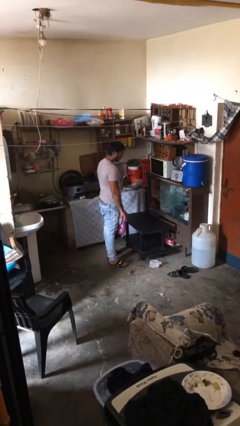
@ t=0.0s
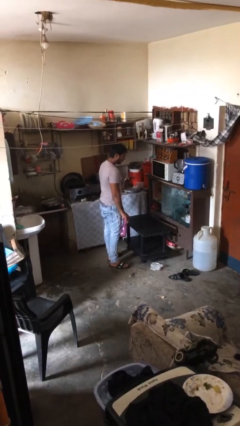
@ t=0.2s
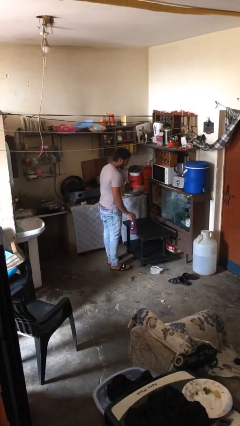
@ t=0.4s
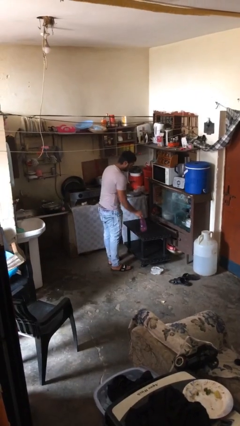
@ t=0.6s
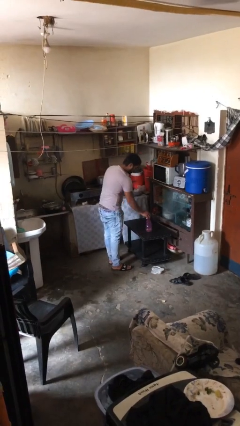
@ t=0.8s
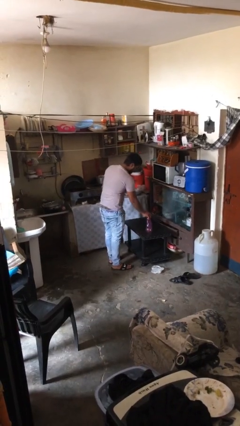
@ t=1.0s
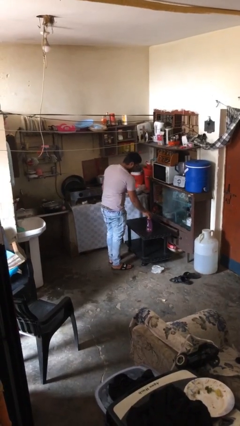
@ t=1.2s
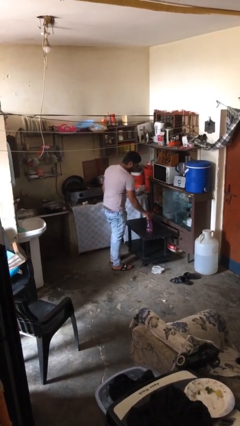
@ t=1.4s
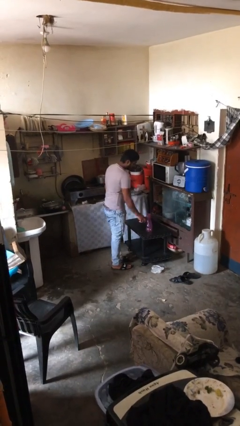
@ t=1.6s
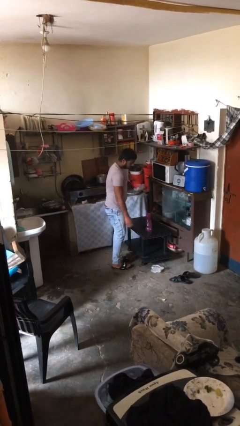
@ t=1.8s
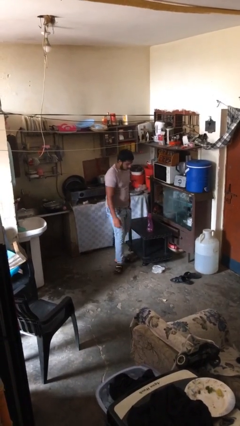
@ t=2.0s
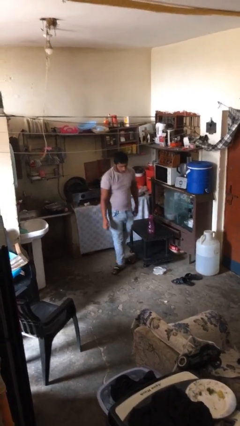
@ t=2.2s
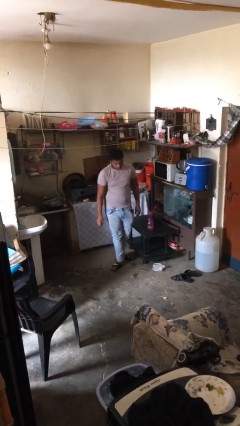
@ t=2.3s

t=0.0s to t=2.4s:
person puts down object on table

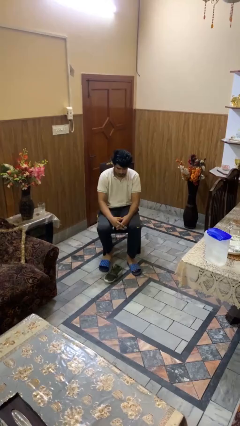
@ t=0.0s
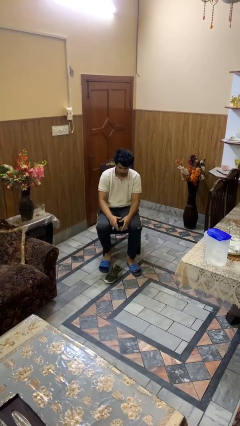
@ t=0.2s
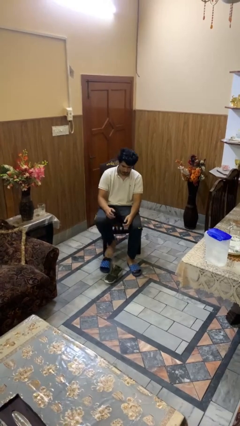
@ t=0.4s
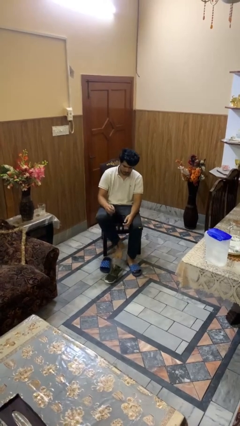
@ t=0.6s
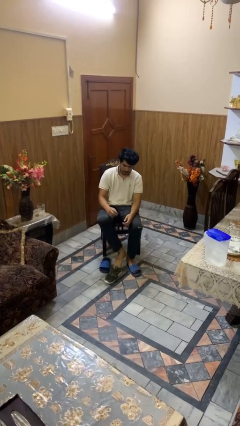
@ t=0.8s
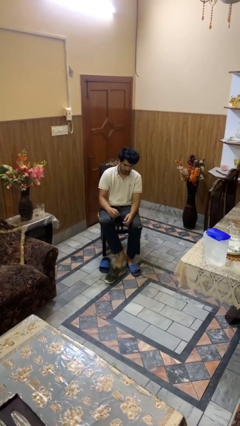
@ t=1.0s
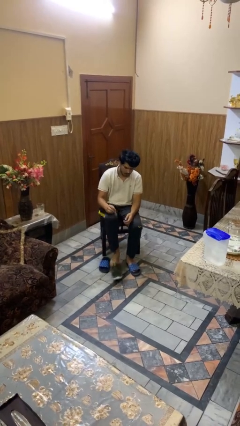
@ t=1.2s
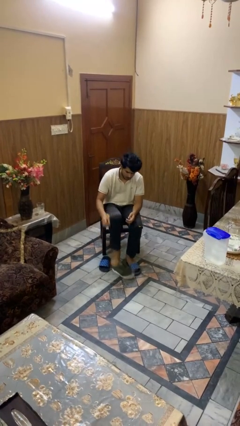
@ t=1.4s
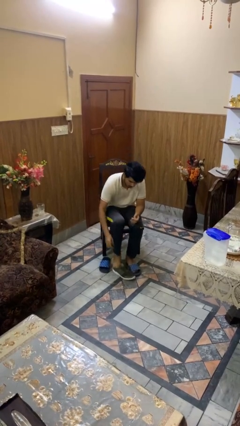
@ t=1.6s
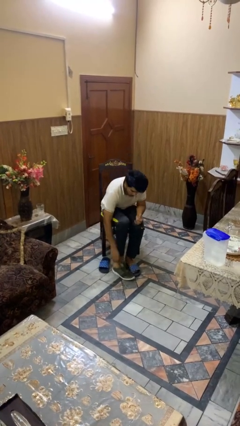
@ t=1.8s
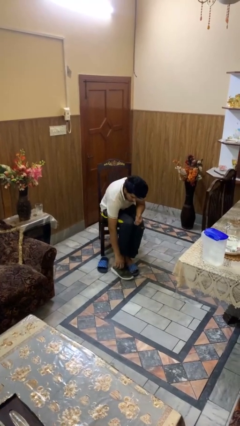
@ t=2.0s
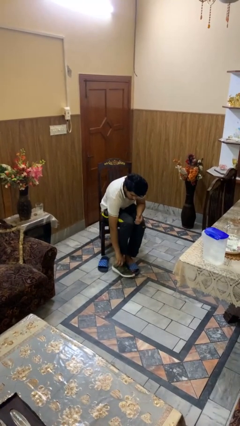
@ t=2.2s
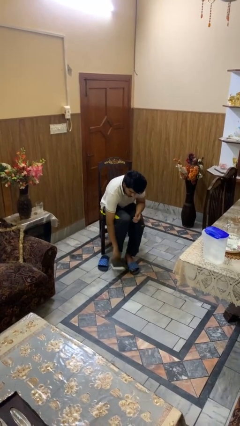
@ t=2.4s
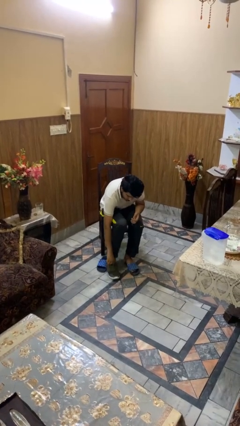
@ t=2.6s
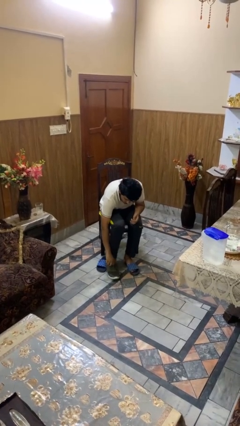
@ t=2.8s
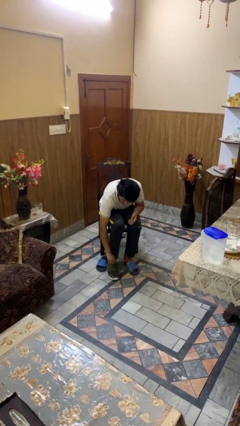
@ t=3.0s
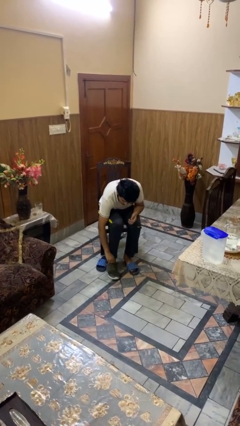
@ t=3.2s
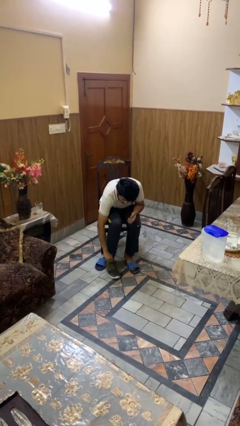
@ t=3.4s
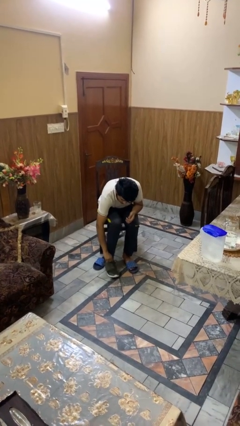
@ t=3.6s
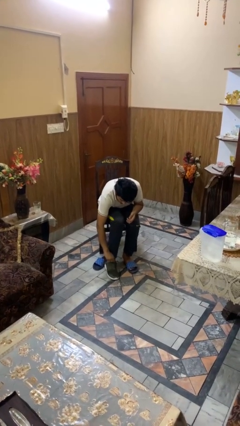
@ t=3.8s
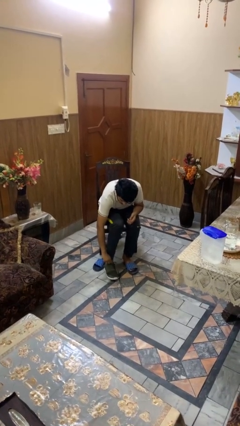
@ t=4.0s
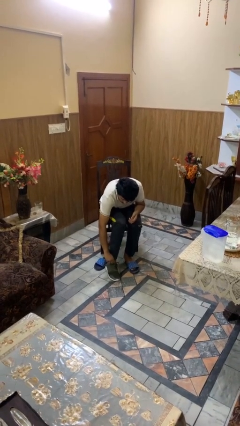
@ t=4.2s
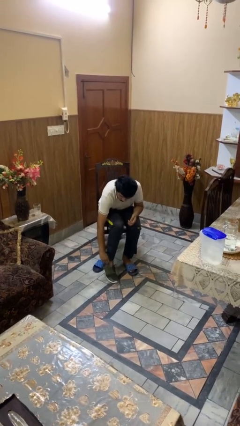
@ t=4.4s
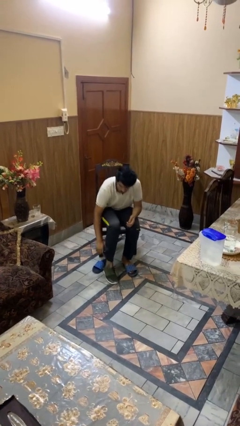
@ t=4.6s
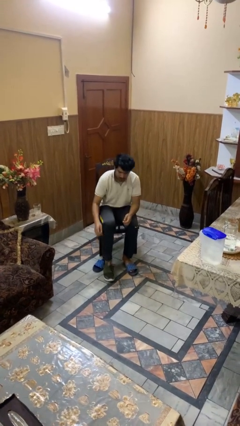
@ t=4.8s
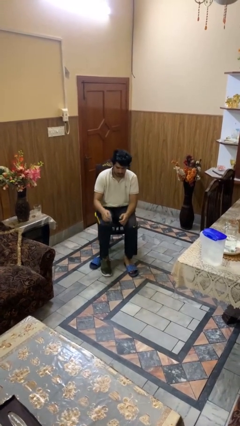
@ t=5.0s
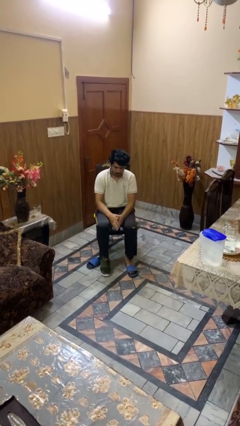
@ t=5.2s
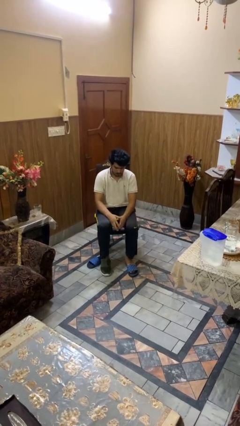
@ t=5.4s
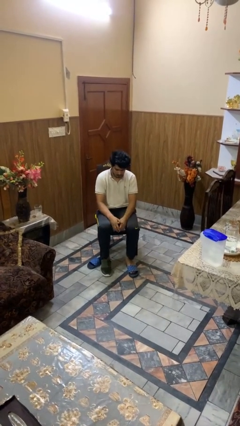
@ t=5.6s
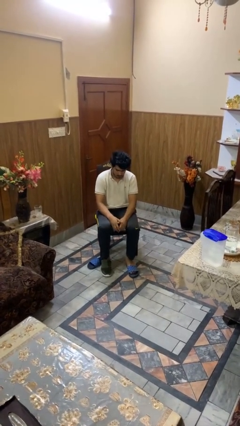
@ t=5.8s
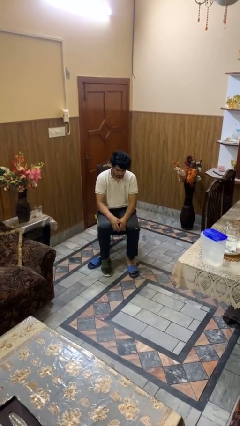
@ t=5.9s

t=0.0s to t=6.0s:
person puts on boots

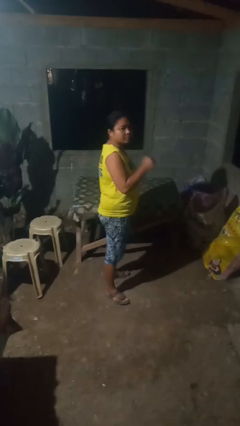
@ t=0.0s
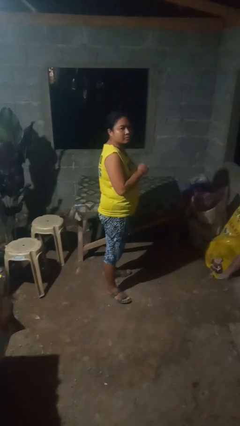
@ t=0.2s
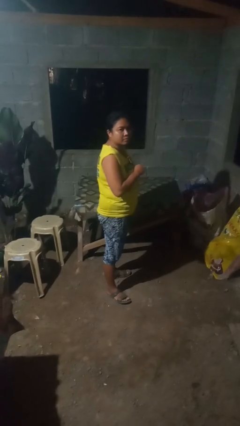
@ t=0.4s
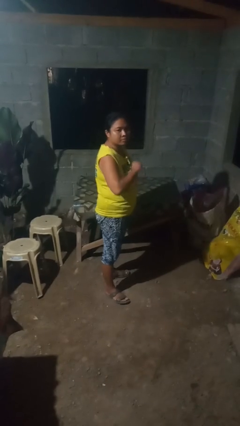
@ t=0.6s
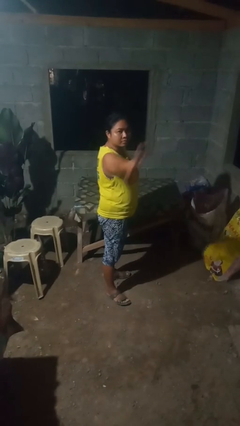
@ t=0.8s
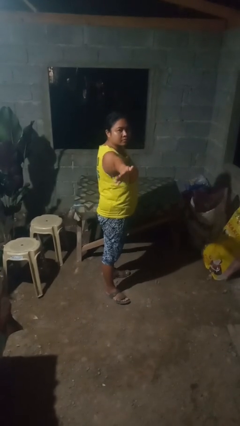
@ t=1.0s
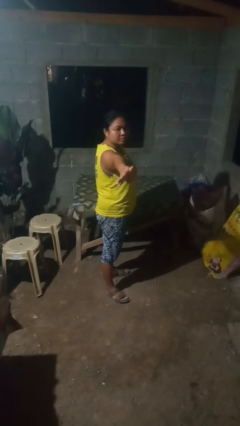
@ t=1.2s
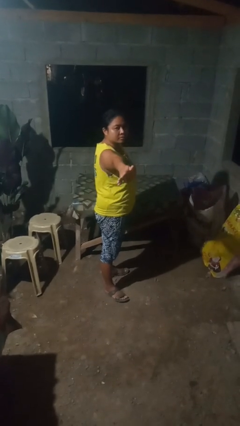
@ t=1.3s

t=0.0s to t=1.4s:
person karate chop

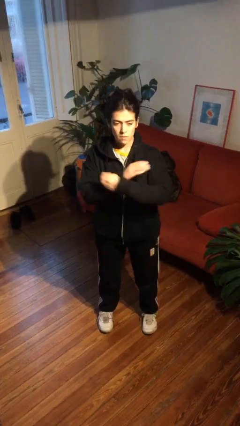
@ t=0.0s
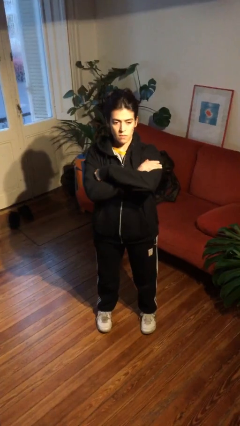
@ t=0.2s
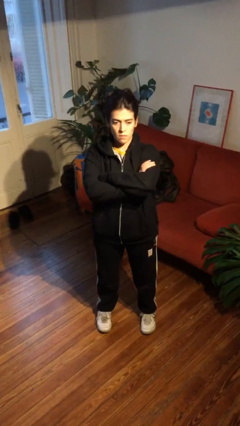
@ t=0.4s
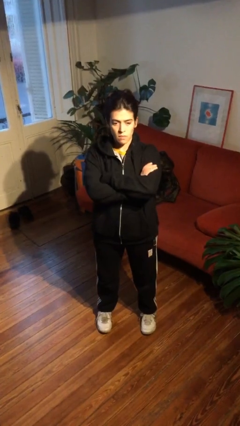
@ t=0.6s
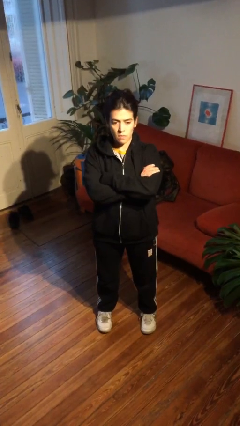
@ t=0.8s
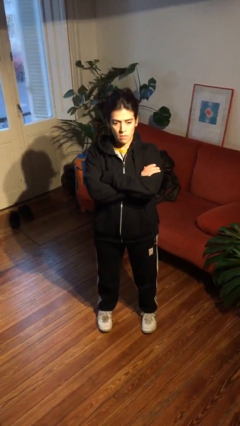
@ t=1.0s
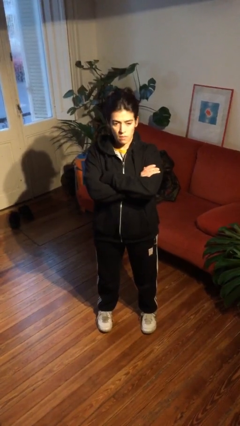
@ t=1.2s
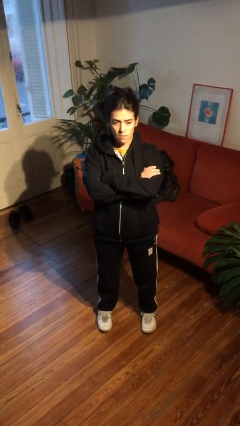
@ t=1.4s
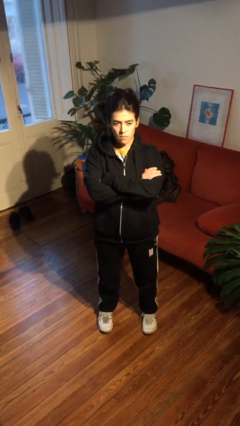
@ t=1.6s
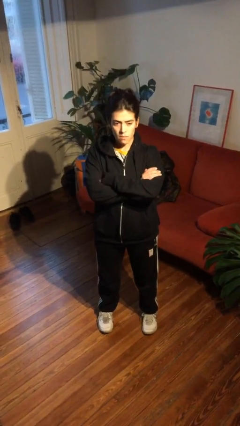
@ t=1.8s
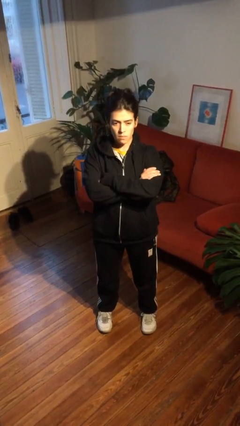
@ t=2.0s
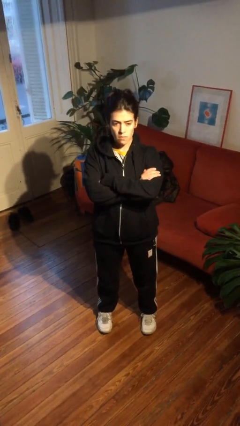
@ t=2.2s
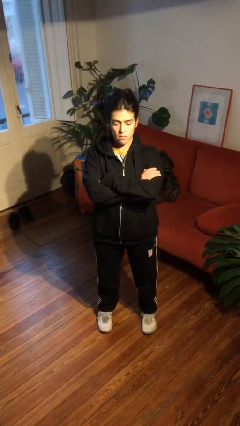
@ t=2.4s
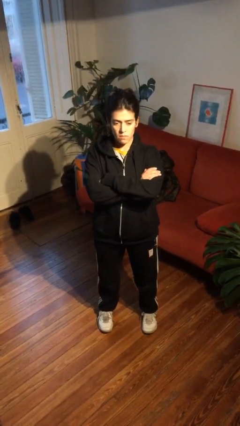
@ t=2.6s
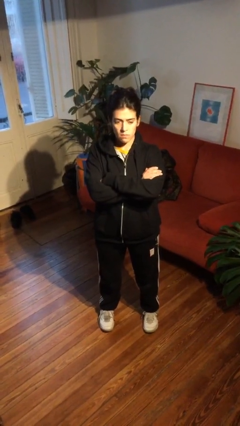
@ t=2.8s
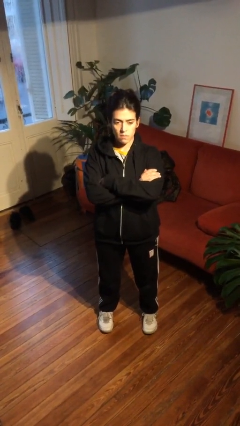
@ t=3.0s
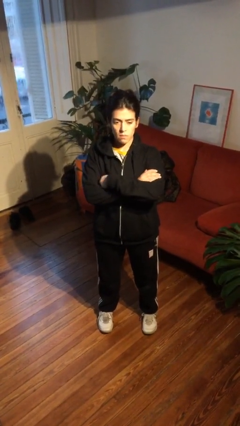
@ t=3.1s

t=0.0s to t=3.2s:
person crosses arms

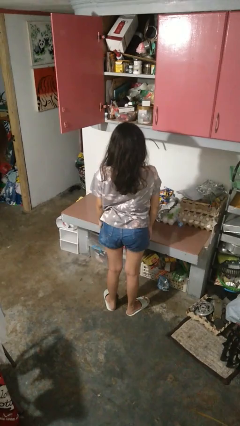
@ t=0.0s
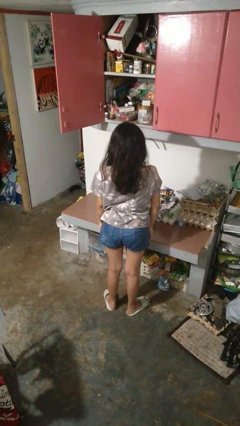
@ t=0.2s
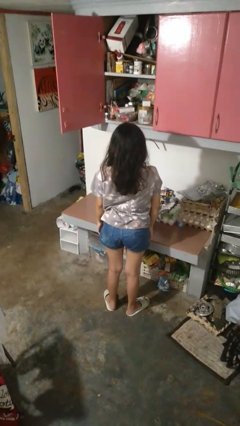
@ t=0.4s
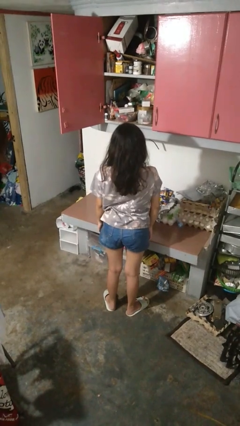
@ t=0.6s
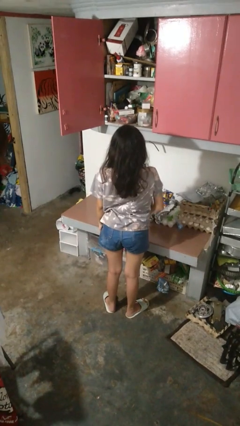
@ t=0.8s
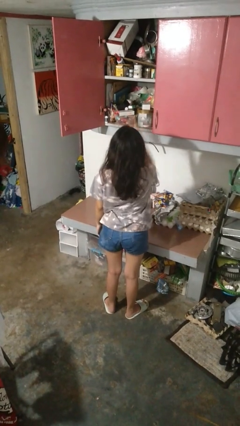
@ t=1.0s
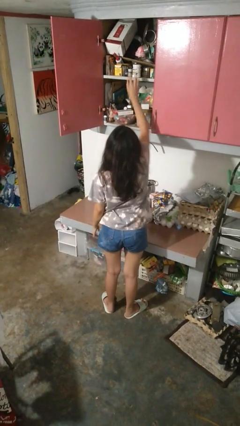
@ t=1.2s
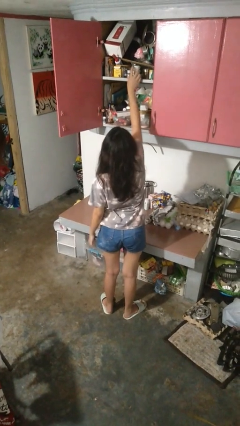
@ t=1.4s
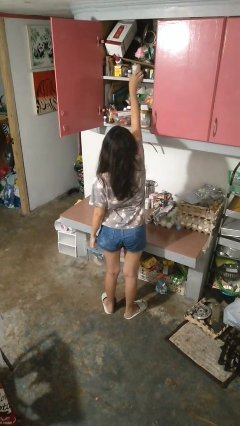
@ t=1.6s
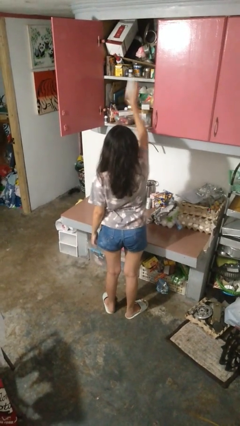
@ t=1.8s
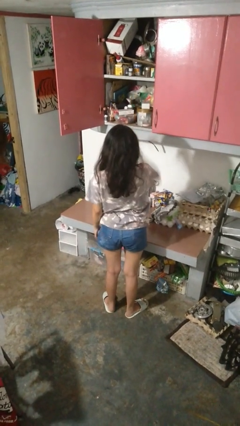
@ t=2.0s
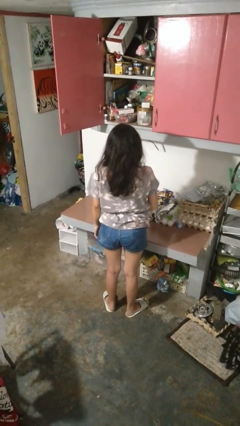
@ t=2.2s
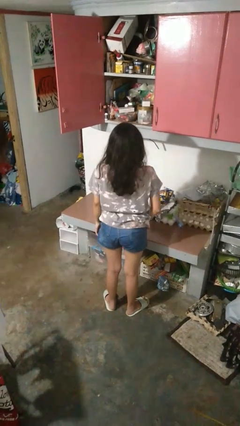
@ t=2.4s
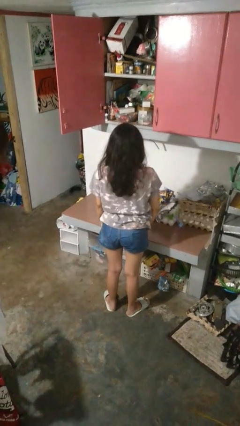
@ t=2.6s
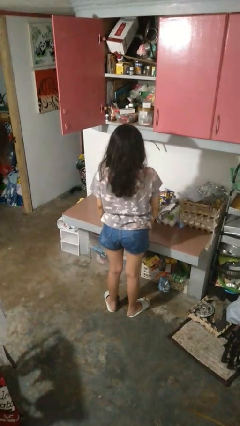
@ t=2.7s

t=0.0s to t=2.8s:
person takes object from cabinet

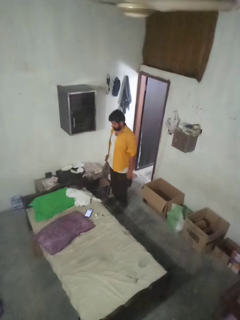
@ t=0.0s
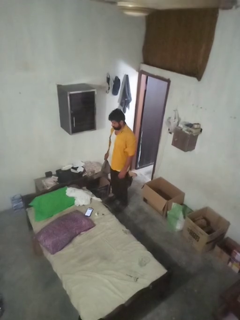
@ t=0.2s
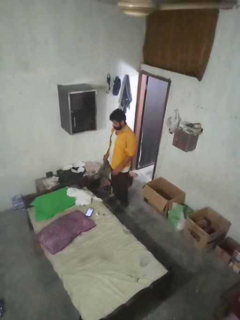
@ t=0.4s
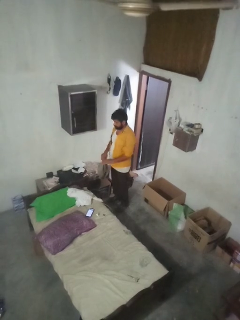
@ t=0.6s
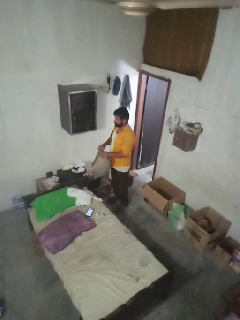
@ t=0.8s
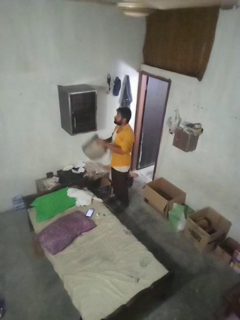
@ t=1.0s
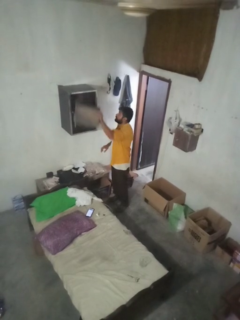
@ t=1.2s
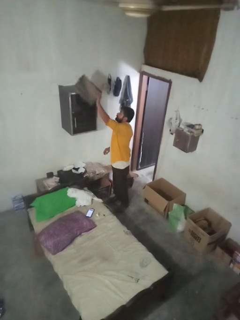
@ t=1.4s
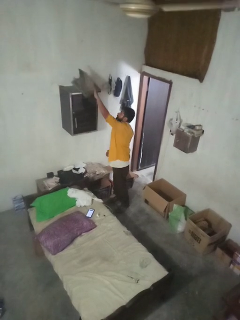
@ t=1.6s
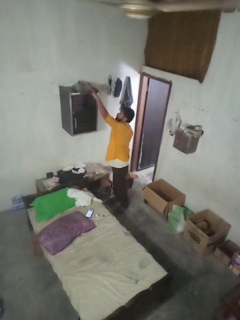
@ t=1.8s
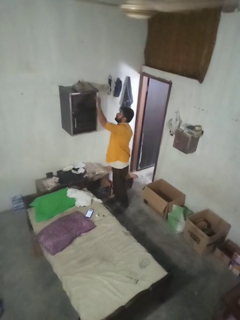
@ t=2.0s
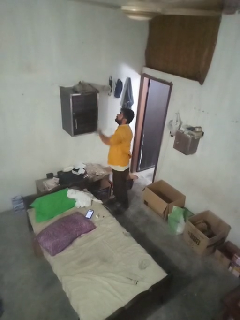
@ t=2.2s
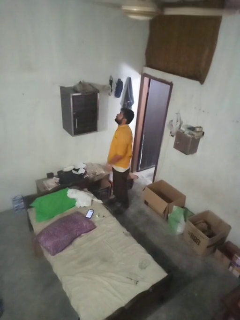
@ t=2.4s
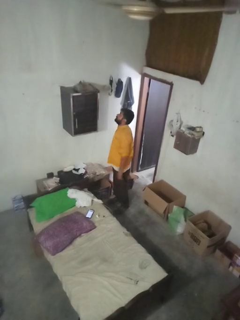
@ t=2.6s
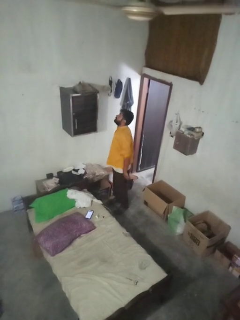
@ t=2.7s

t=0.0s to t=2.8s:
person puts down object on shelf
